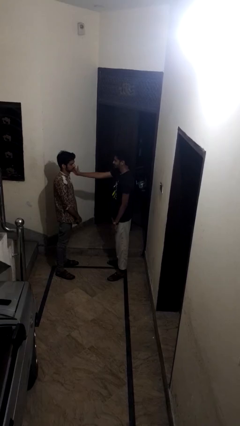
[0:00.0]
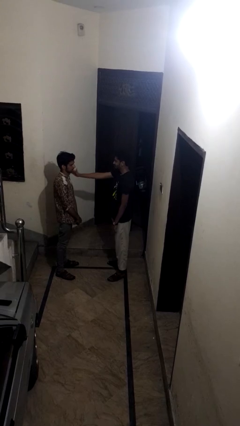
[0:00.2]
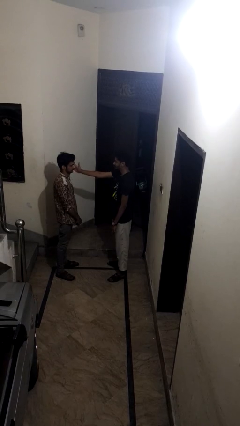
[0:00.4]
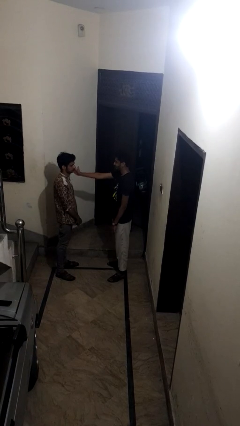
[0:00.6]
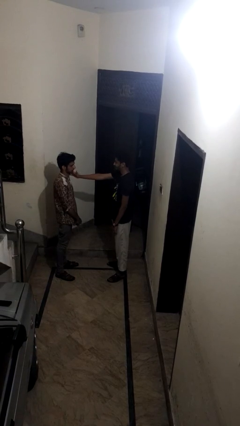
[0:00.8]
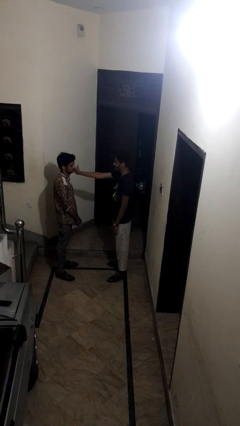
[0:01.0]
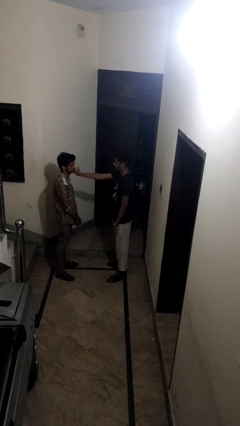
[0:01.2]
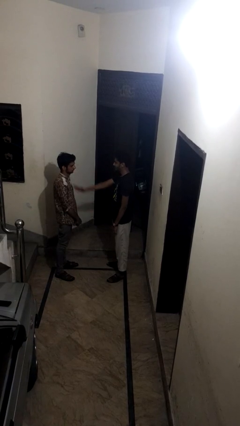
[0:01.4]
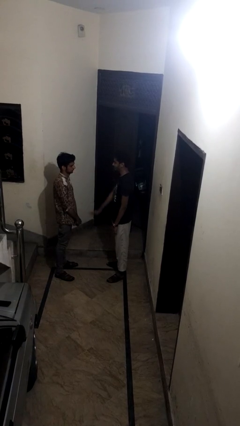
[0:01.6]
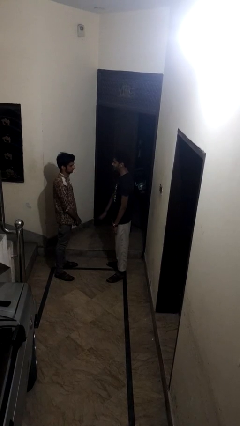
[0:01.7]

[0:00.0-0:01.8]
person touches face of person

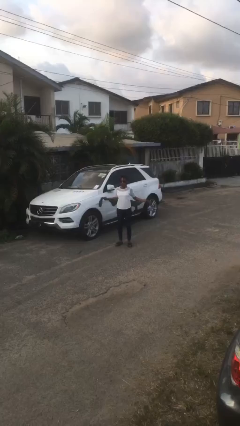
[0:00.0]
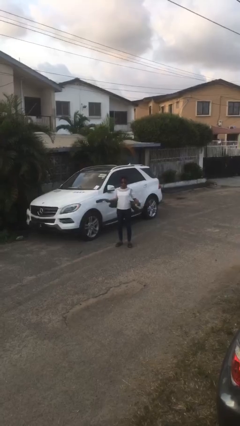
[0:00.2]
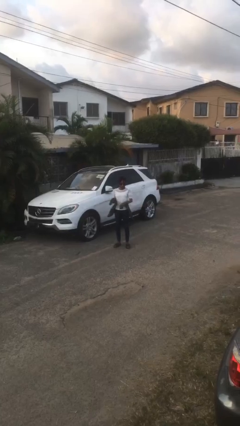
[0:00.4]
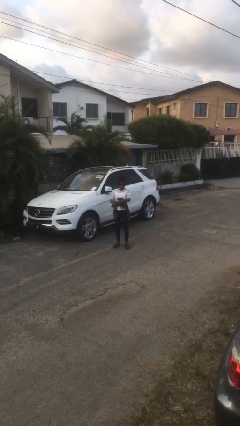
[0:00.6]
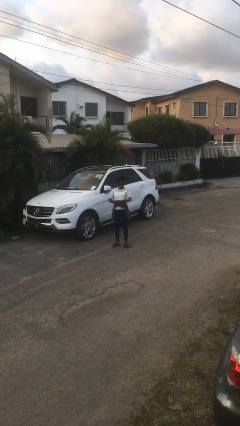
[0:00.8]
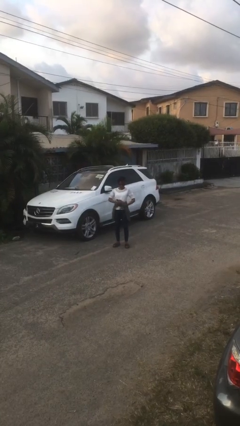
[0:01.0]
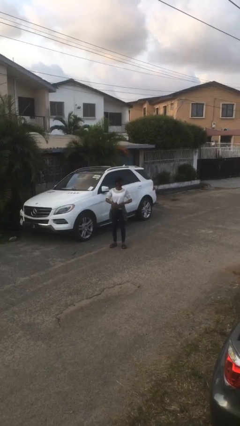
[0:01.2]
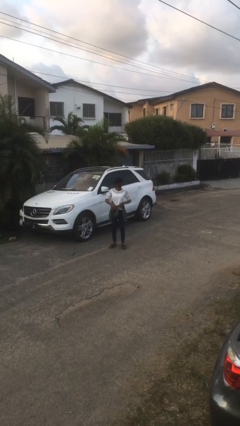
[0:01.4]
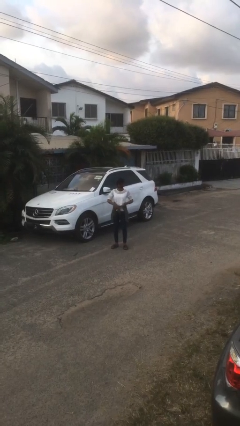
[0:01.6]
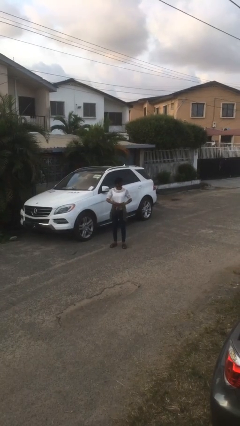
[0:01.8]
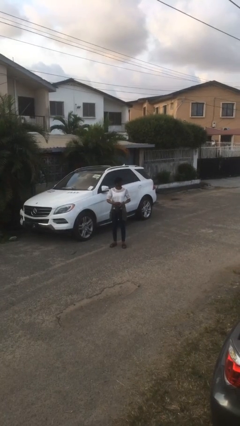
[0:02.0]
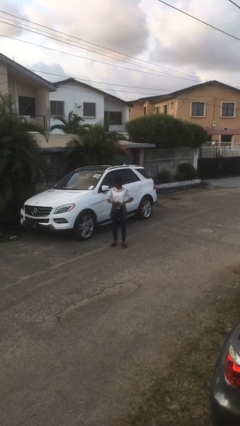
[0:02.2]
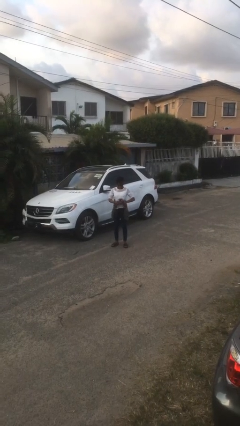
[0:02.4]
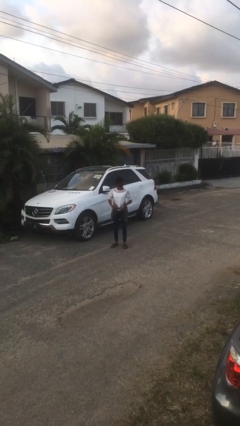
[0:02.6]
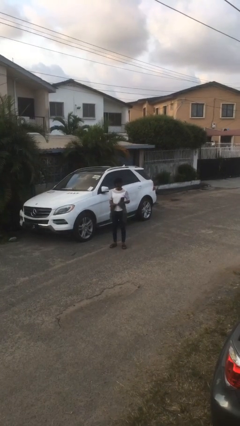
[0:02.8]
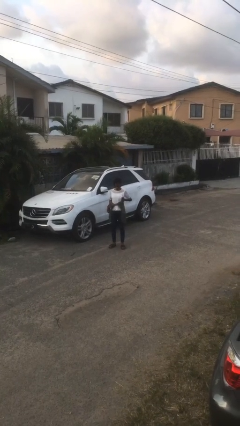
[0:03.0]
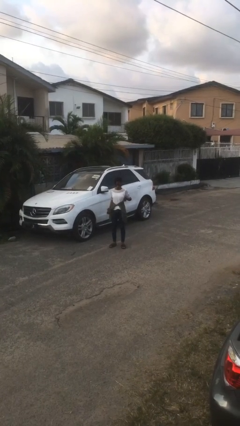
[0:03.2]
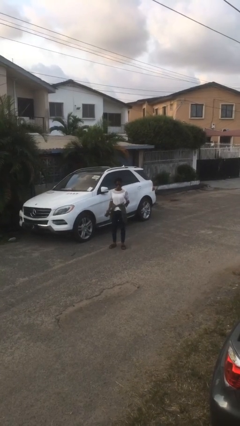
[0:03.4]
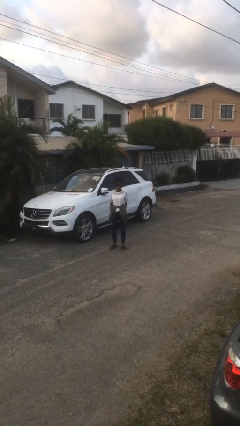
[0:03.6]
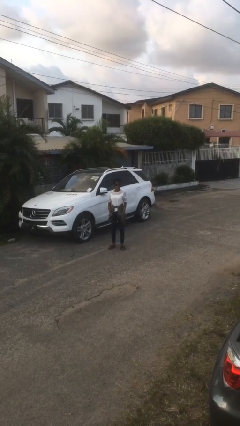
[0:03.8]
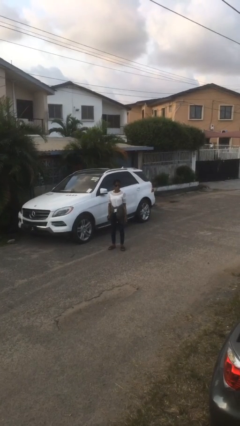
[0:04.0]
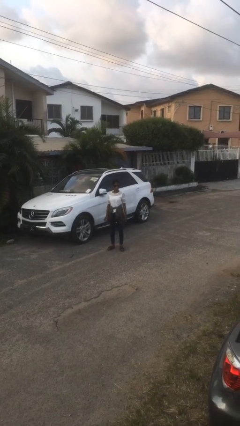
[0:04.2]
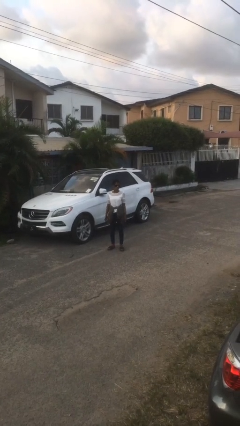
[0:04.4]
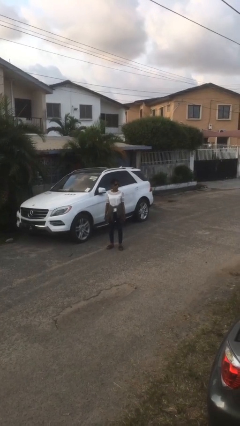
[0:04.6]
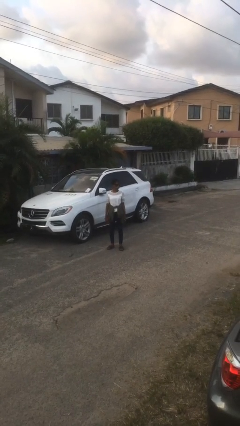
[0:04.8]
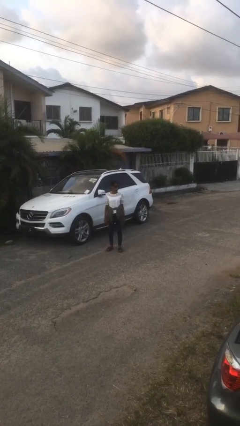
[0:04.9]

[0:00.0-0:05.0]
person ties jacket around waist

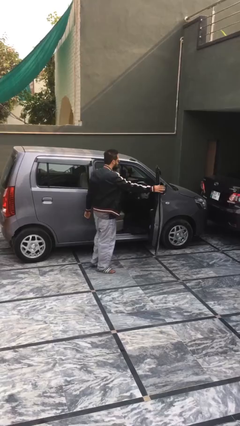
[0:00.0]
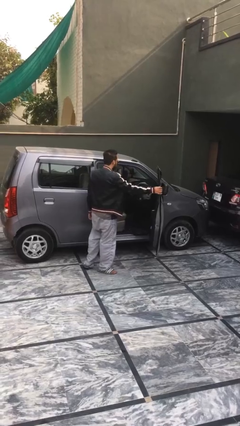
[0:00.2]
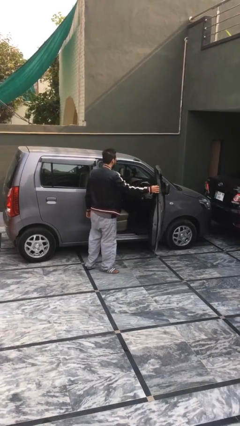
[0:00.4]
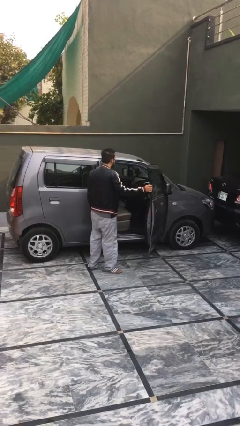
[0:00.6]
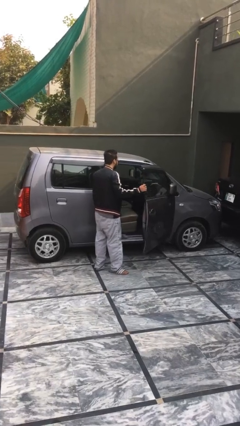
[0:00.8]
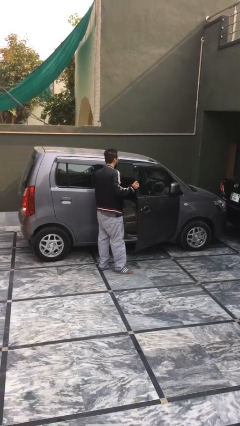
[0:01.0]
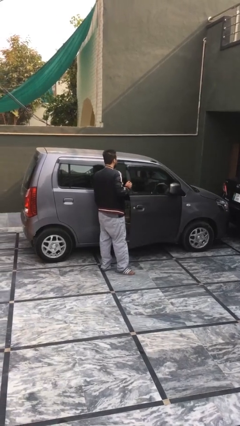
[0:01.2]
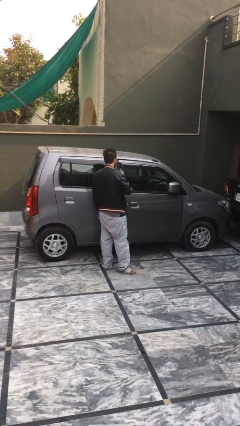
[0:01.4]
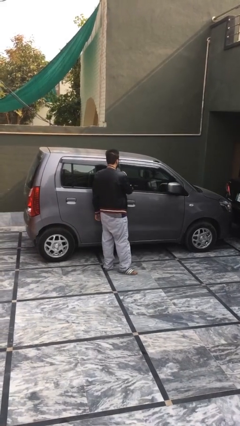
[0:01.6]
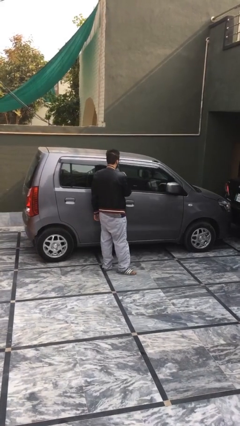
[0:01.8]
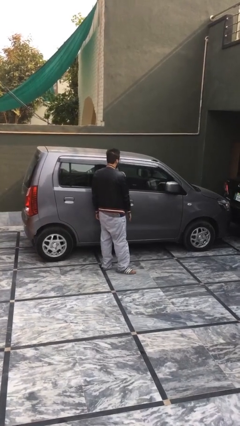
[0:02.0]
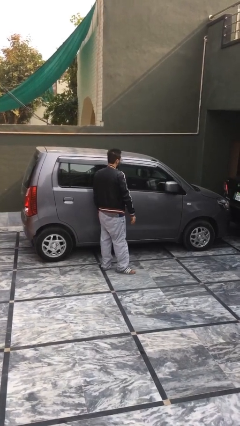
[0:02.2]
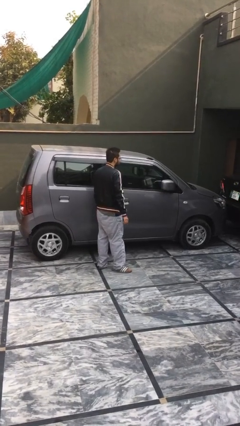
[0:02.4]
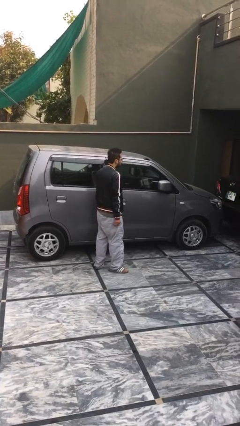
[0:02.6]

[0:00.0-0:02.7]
person closes car door

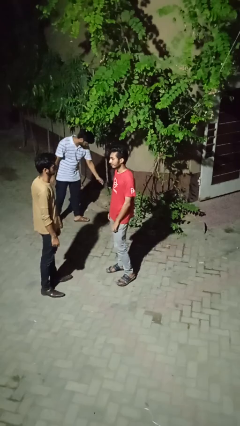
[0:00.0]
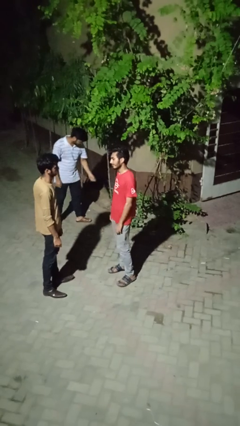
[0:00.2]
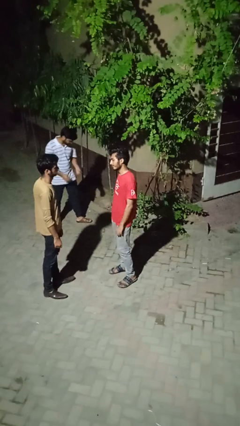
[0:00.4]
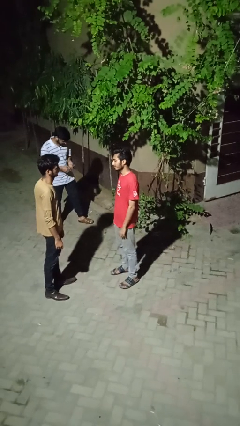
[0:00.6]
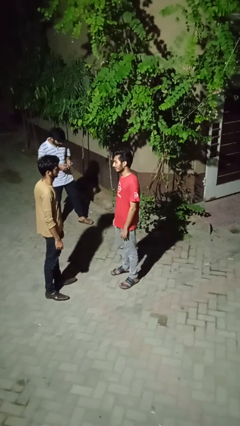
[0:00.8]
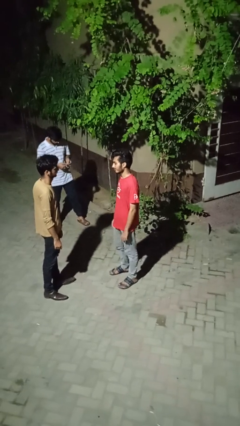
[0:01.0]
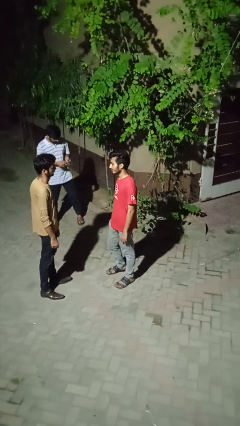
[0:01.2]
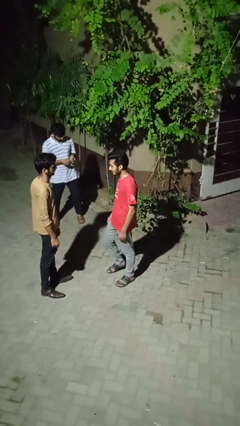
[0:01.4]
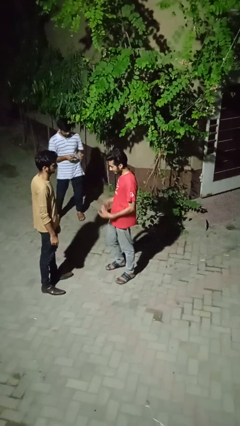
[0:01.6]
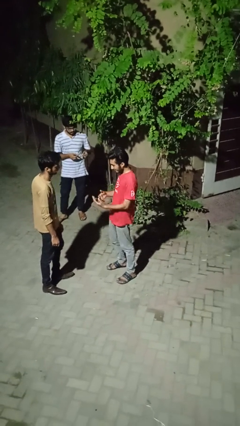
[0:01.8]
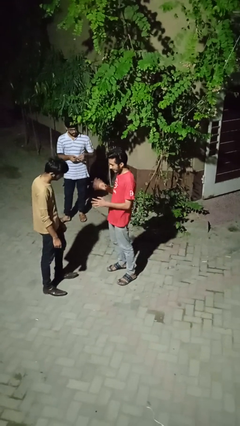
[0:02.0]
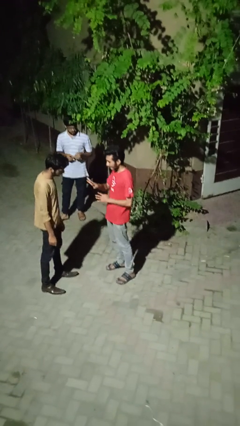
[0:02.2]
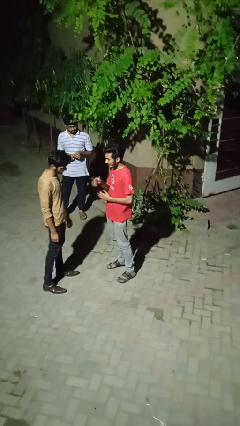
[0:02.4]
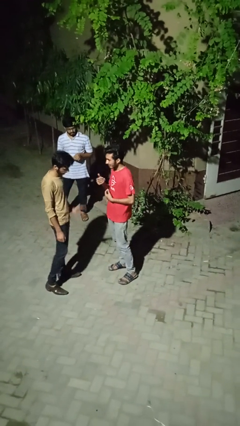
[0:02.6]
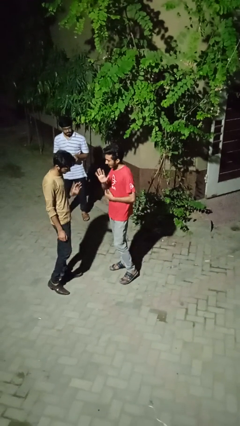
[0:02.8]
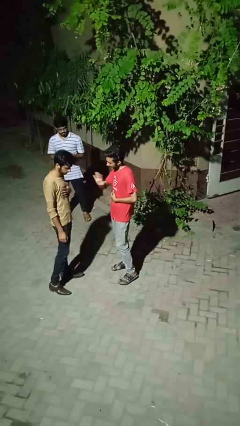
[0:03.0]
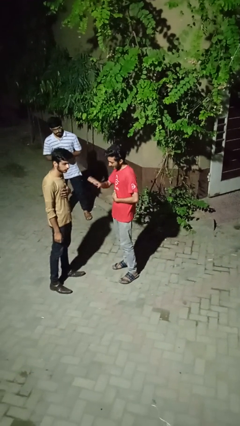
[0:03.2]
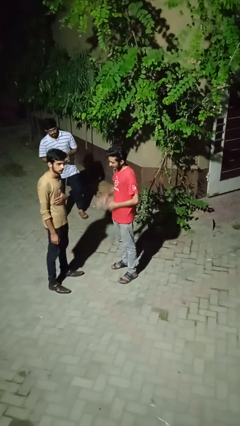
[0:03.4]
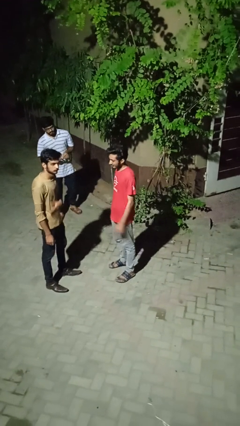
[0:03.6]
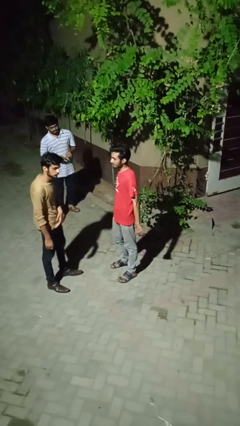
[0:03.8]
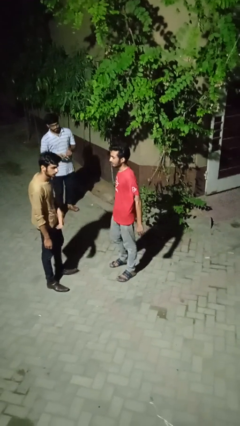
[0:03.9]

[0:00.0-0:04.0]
person talks to person

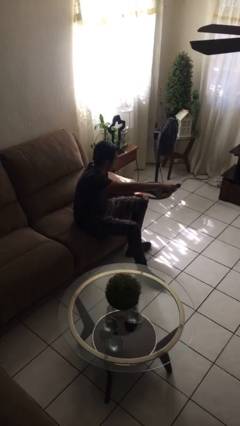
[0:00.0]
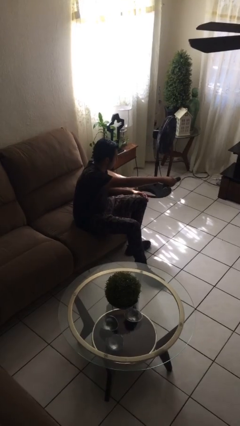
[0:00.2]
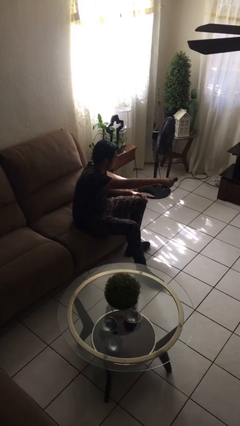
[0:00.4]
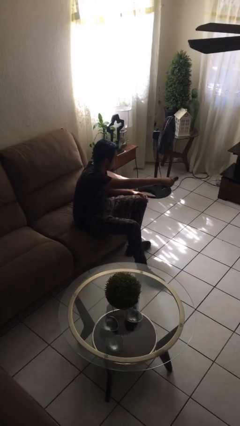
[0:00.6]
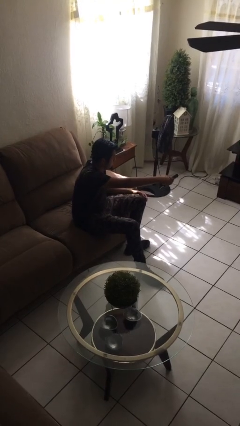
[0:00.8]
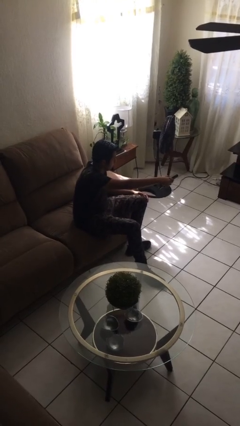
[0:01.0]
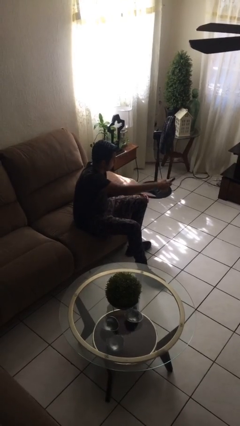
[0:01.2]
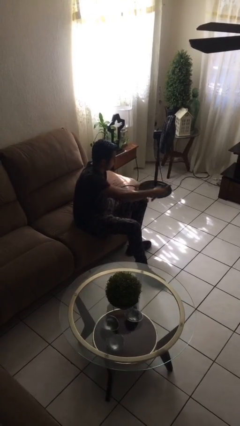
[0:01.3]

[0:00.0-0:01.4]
person uses television remote

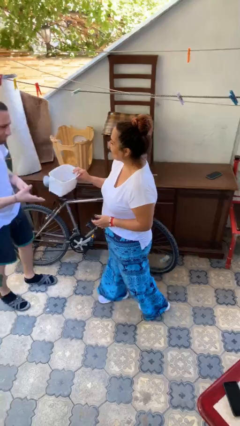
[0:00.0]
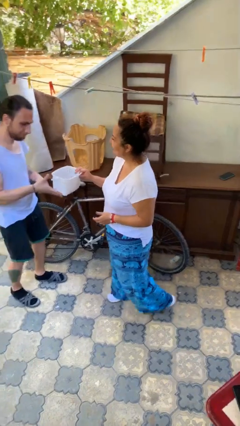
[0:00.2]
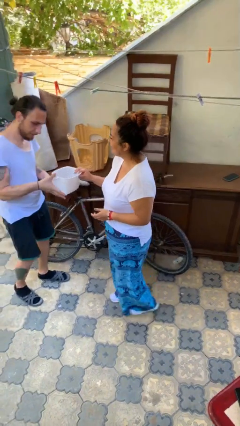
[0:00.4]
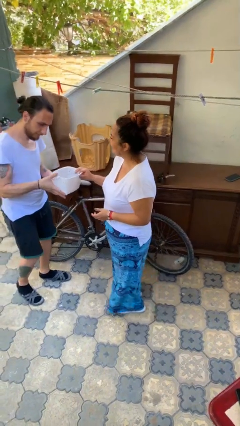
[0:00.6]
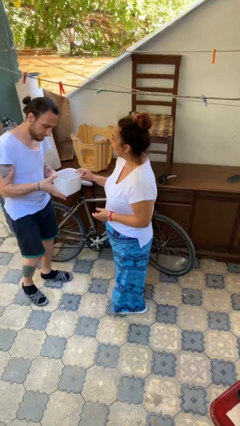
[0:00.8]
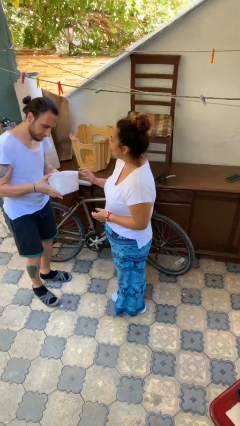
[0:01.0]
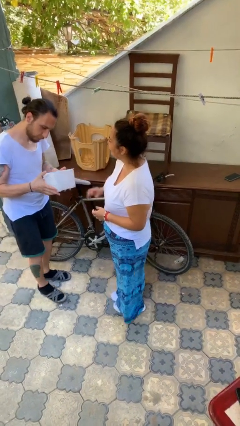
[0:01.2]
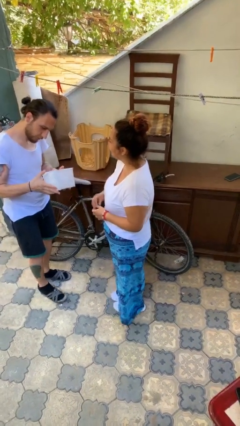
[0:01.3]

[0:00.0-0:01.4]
person transfers object to person

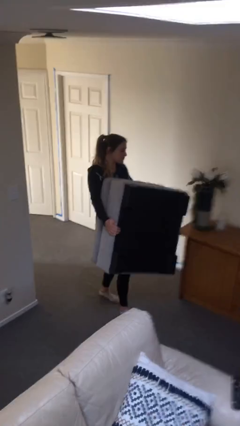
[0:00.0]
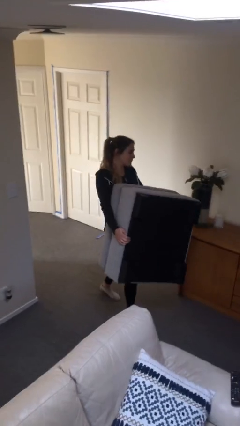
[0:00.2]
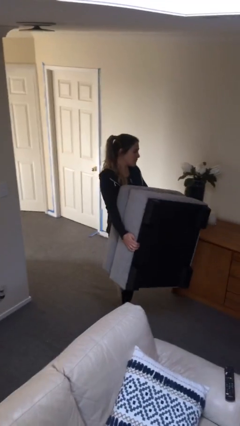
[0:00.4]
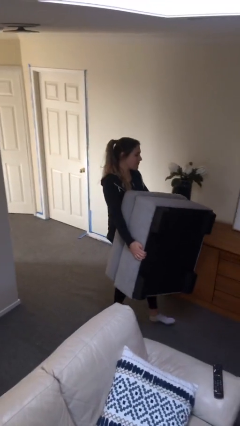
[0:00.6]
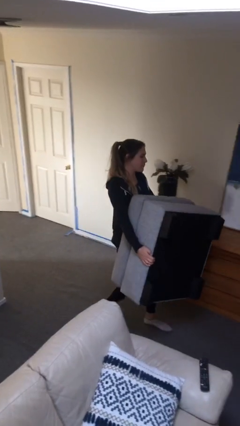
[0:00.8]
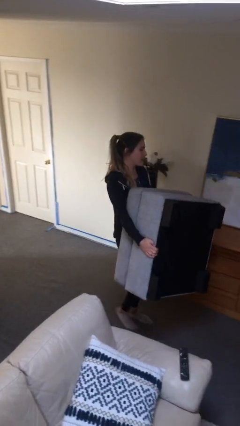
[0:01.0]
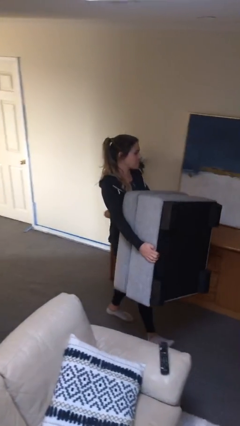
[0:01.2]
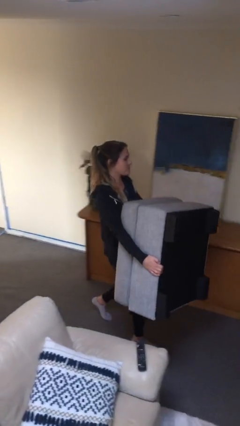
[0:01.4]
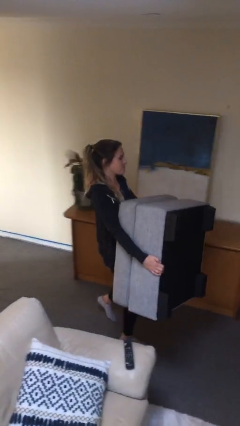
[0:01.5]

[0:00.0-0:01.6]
person carries heavy object
